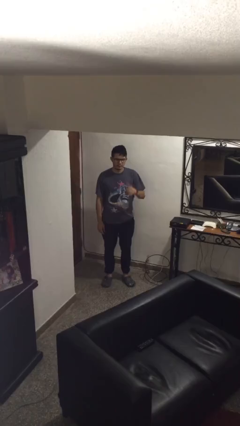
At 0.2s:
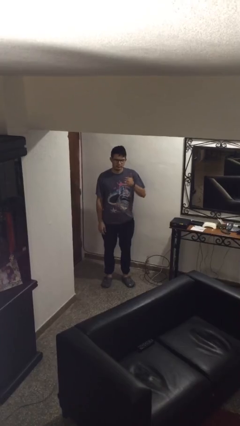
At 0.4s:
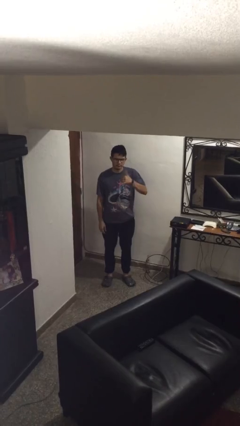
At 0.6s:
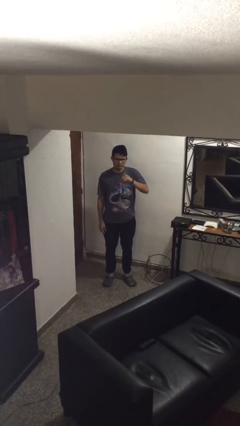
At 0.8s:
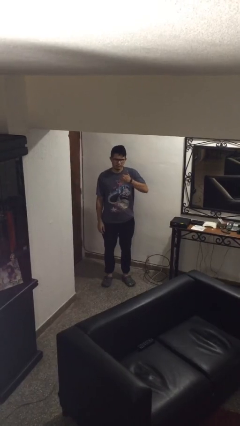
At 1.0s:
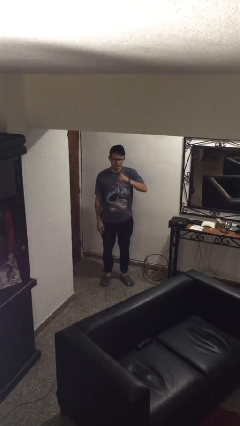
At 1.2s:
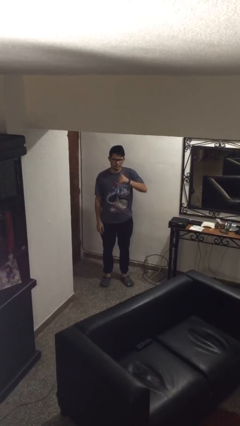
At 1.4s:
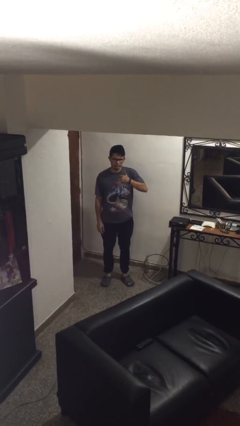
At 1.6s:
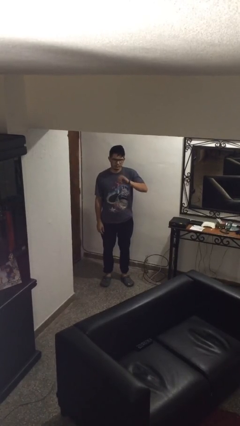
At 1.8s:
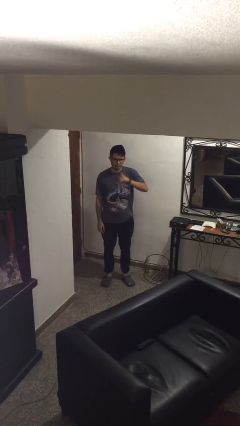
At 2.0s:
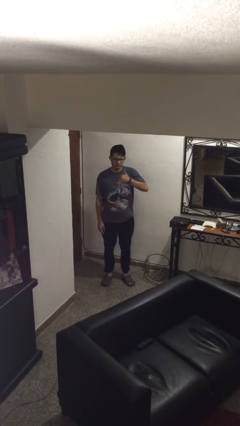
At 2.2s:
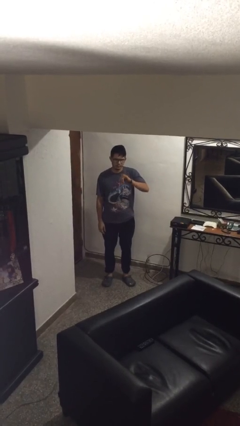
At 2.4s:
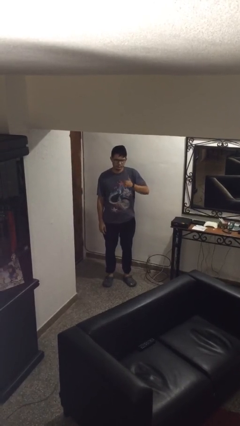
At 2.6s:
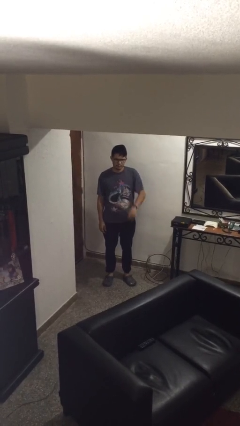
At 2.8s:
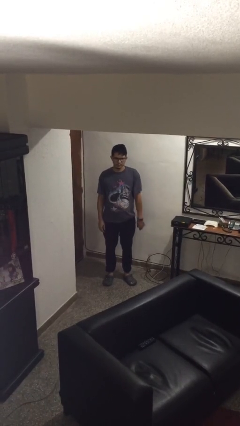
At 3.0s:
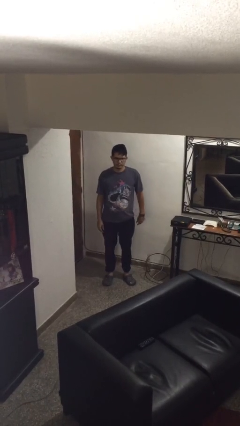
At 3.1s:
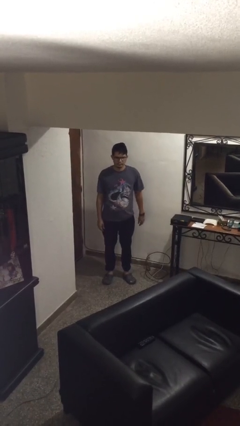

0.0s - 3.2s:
person gestures hang loose

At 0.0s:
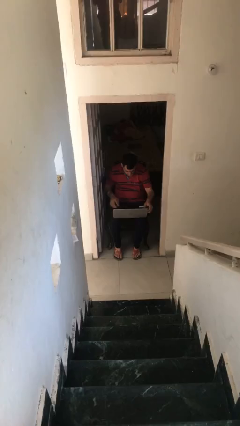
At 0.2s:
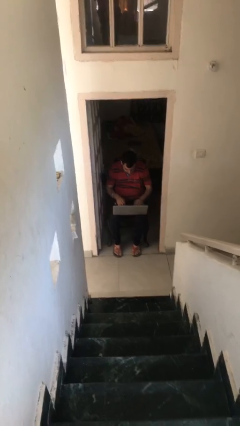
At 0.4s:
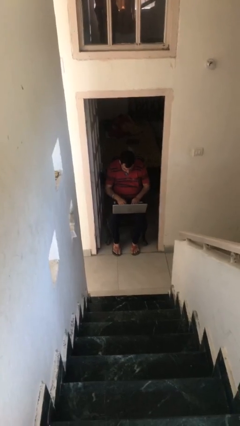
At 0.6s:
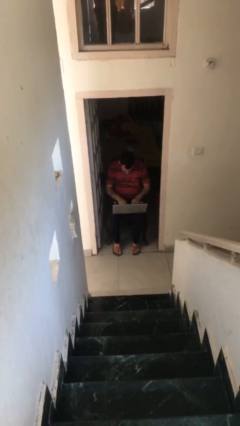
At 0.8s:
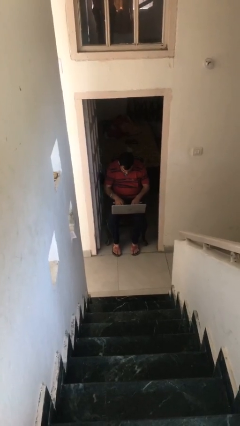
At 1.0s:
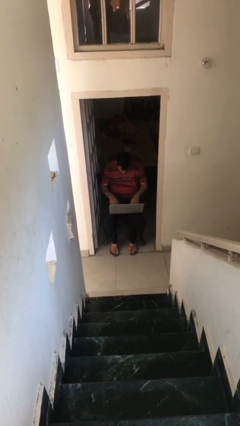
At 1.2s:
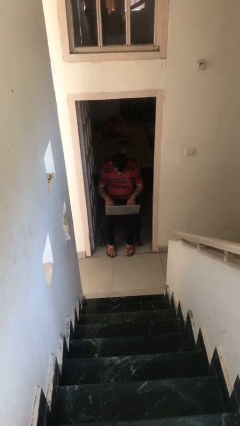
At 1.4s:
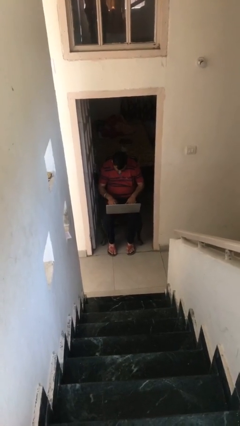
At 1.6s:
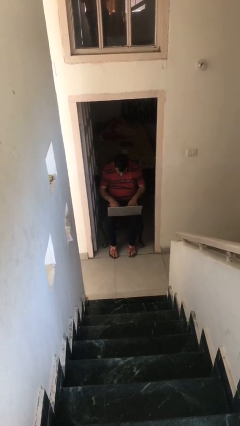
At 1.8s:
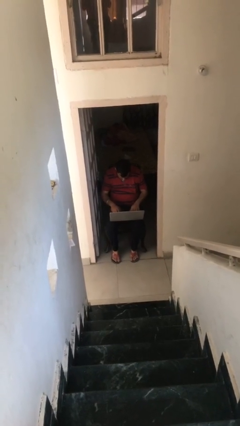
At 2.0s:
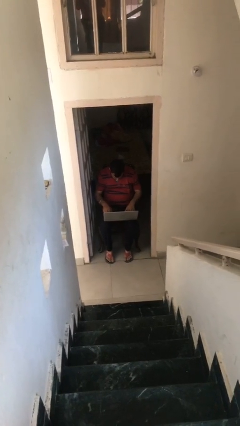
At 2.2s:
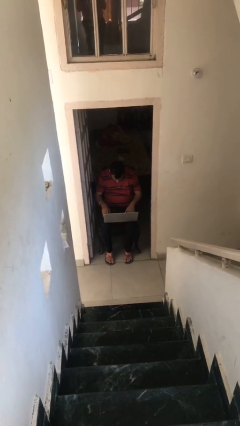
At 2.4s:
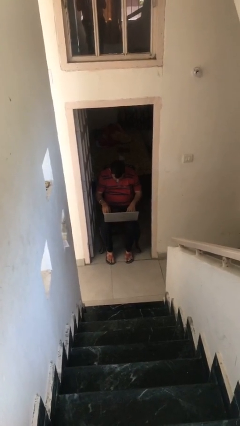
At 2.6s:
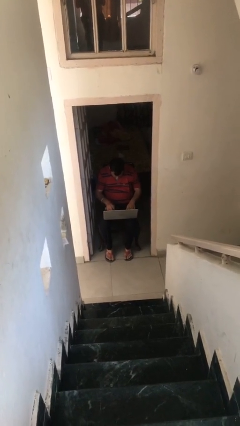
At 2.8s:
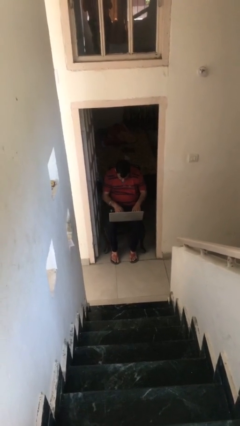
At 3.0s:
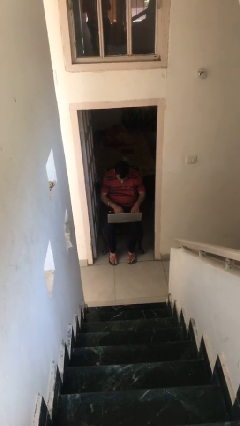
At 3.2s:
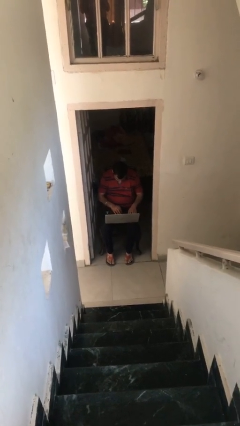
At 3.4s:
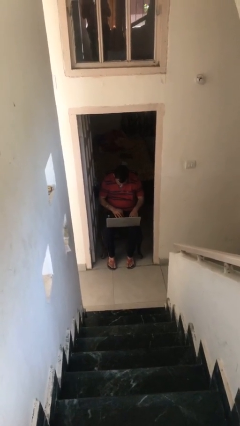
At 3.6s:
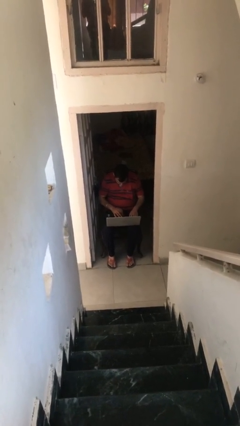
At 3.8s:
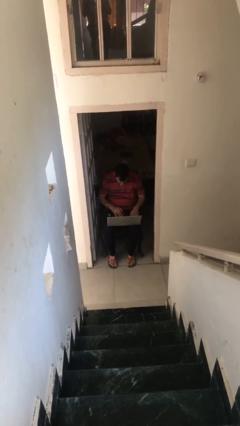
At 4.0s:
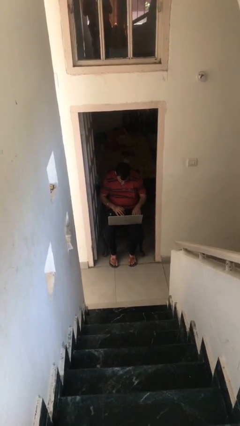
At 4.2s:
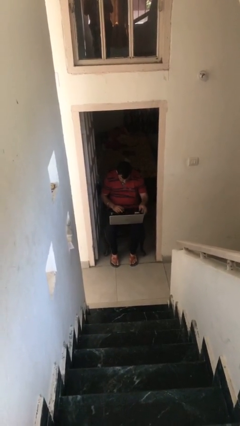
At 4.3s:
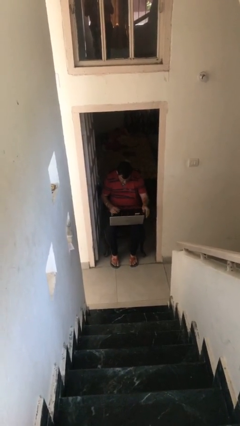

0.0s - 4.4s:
person interacts with laptop

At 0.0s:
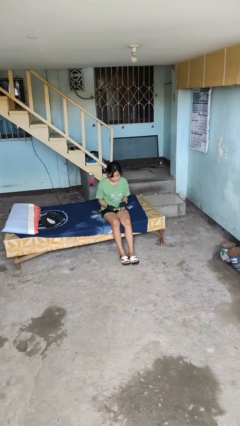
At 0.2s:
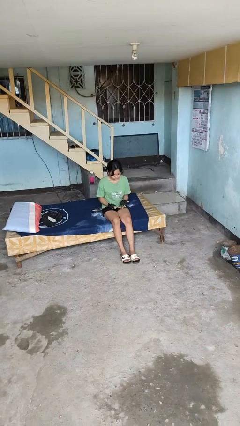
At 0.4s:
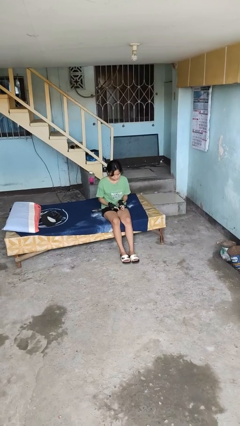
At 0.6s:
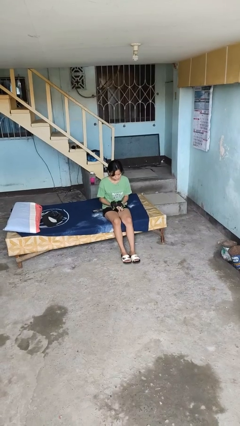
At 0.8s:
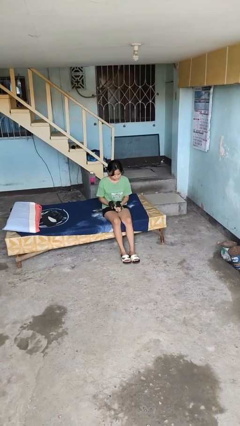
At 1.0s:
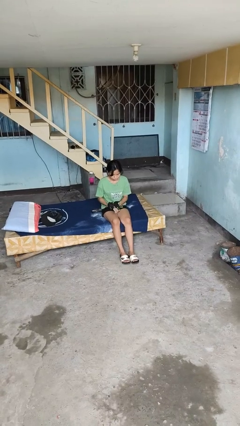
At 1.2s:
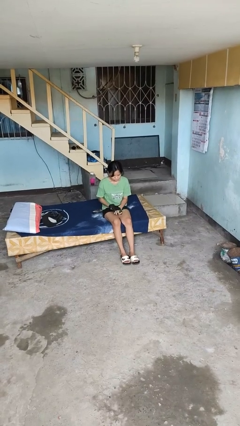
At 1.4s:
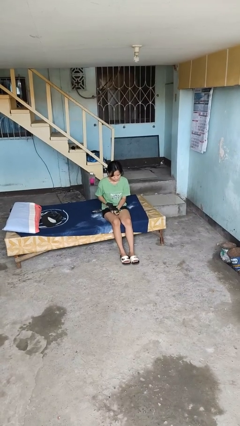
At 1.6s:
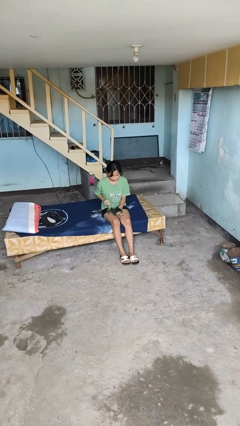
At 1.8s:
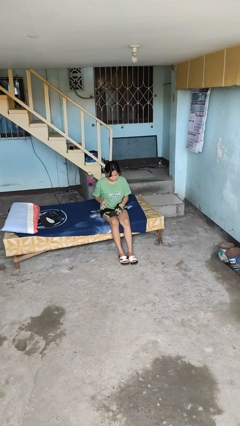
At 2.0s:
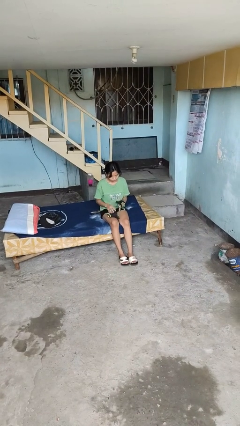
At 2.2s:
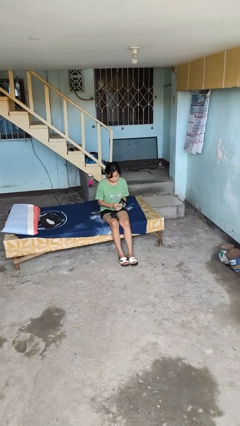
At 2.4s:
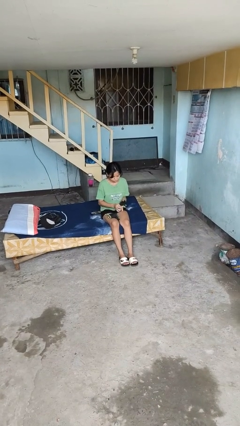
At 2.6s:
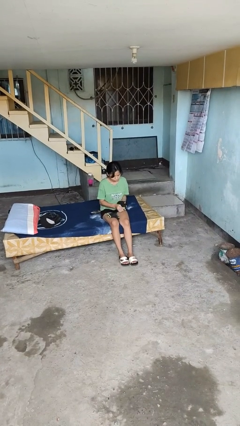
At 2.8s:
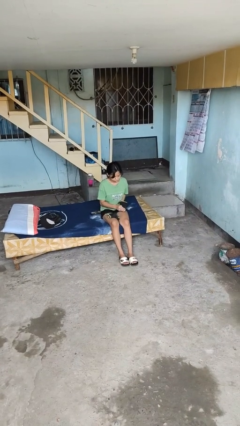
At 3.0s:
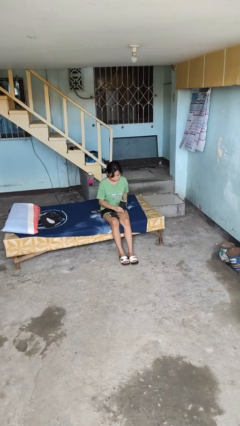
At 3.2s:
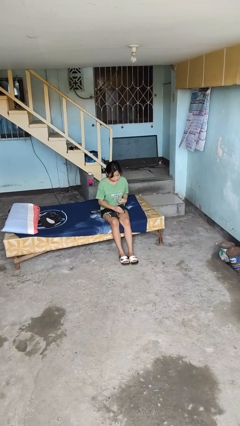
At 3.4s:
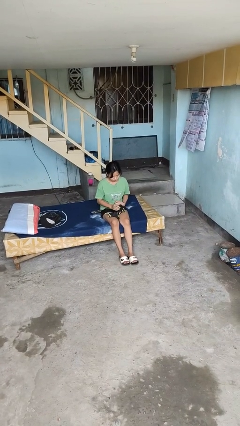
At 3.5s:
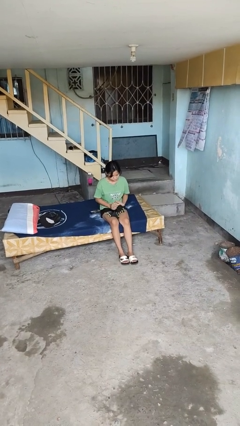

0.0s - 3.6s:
person takes off gloves

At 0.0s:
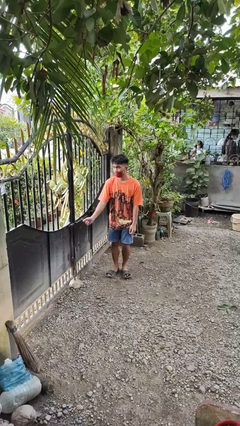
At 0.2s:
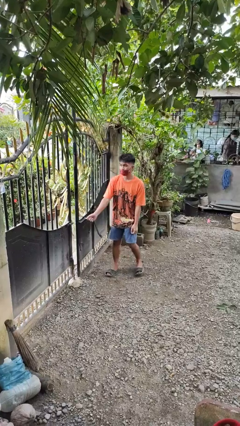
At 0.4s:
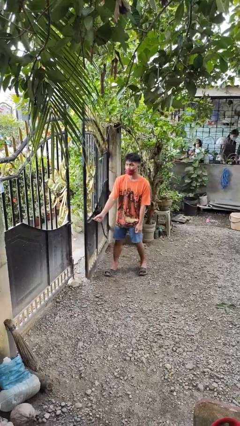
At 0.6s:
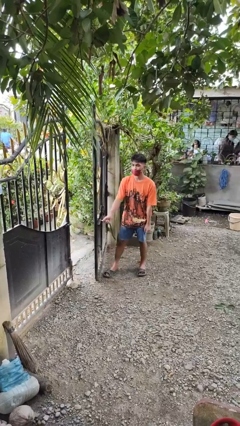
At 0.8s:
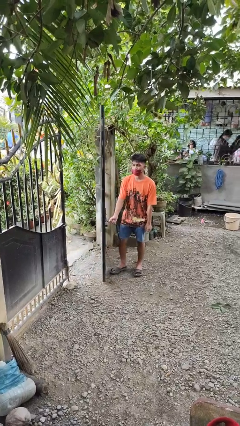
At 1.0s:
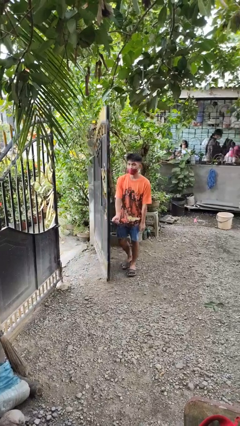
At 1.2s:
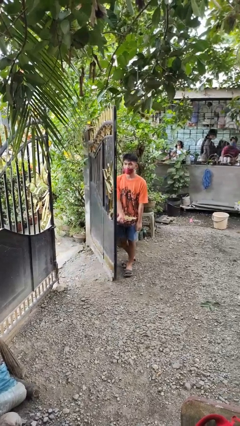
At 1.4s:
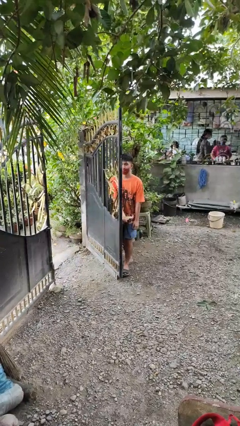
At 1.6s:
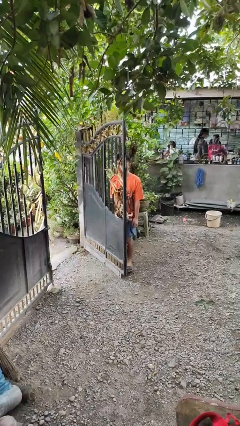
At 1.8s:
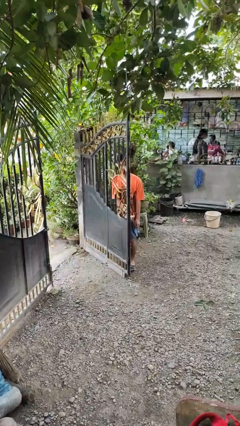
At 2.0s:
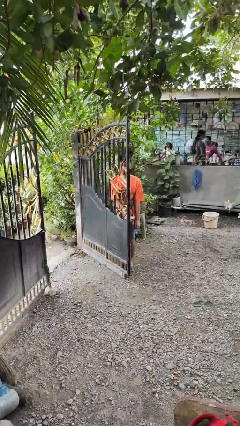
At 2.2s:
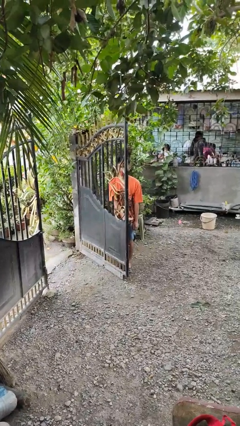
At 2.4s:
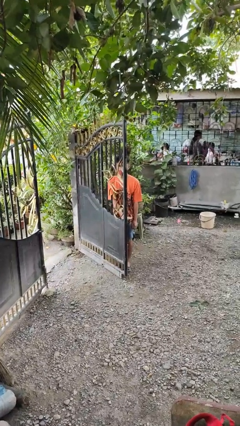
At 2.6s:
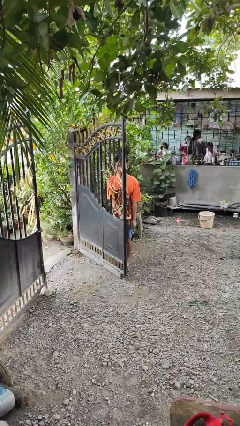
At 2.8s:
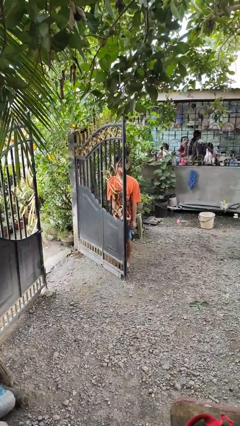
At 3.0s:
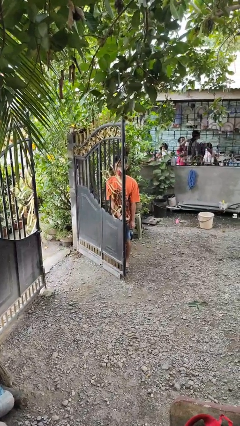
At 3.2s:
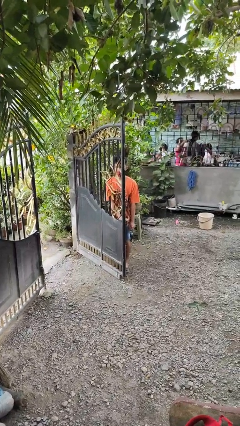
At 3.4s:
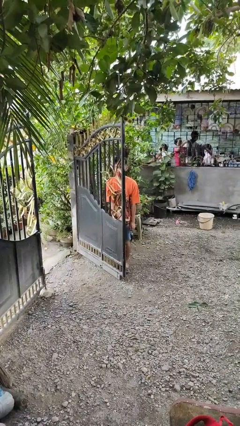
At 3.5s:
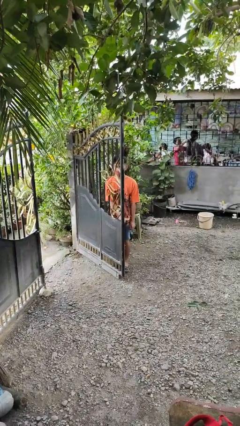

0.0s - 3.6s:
person opens gate

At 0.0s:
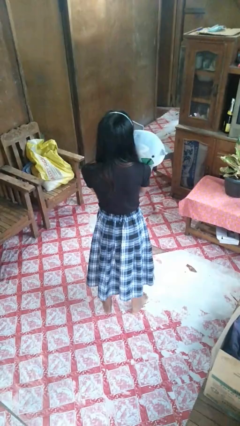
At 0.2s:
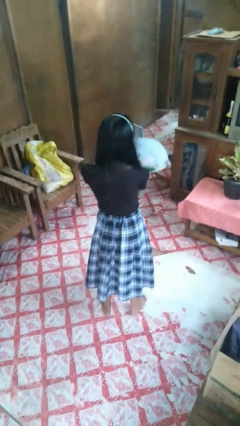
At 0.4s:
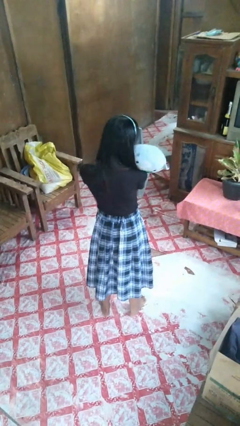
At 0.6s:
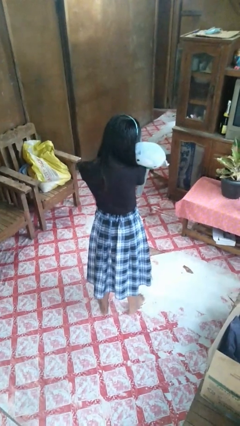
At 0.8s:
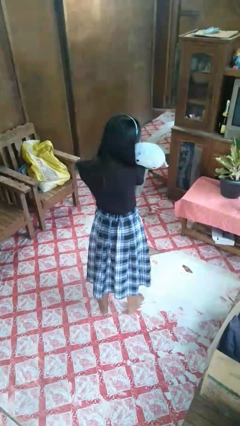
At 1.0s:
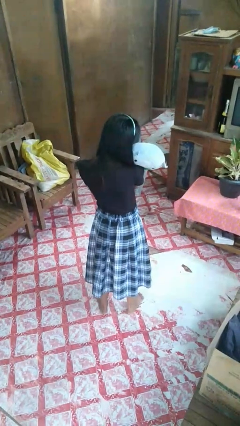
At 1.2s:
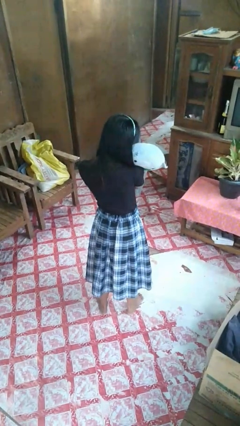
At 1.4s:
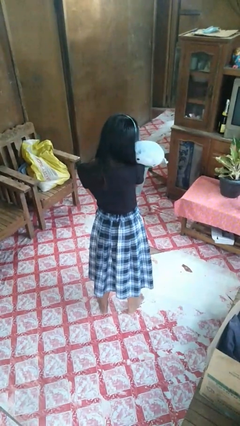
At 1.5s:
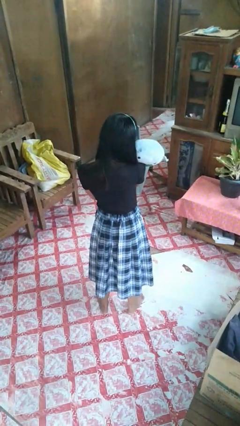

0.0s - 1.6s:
person hugs stuffed animal

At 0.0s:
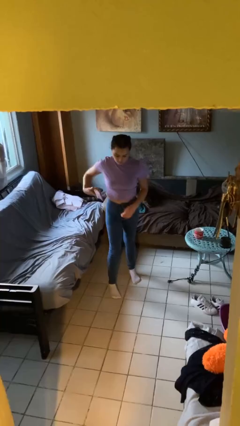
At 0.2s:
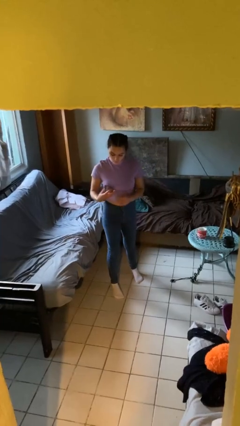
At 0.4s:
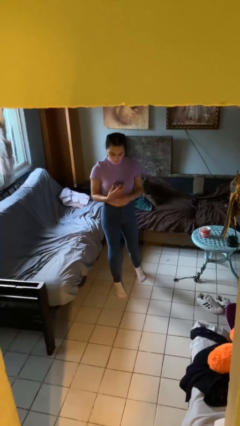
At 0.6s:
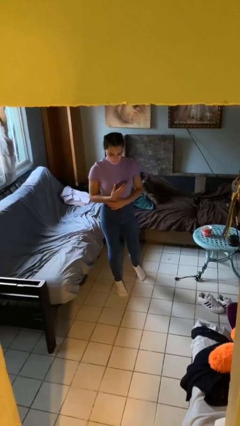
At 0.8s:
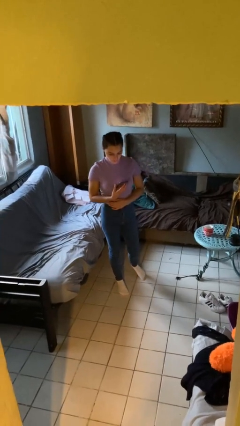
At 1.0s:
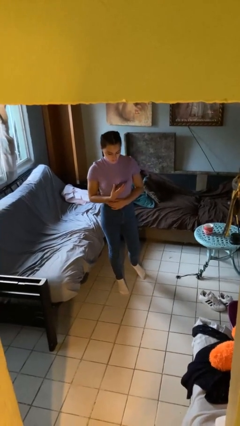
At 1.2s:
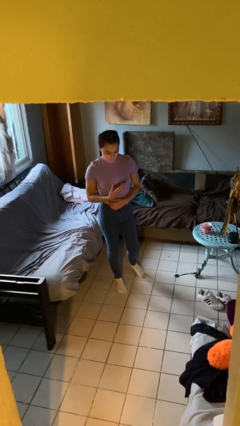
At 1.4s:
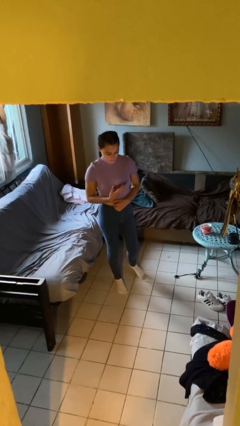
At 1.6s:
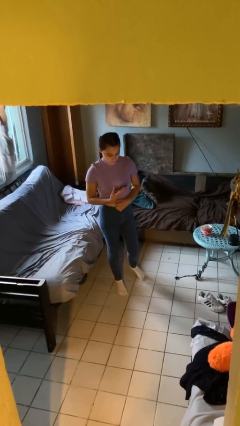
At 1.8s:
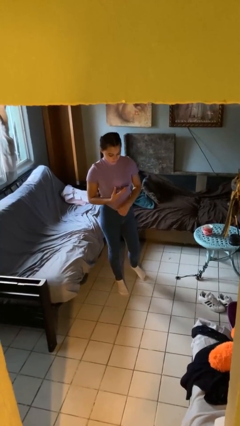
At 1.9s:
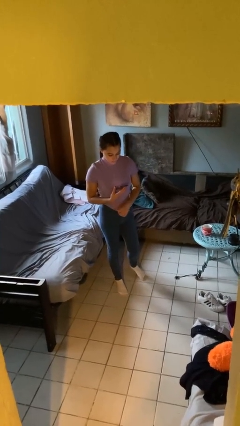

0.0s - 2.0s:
person takes phone from pocket
